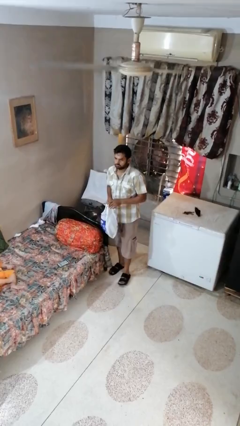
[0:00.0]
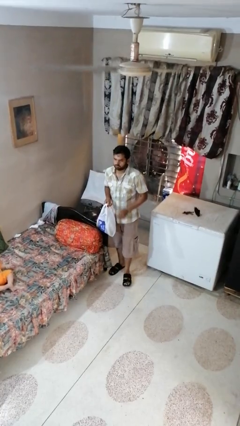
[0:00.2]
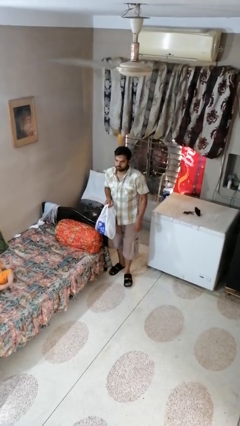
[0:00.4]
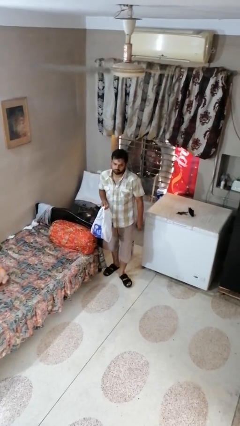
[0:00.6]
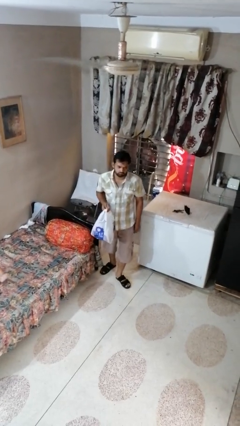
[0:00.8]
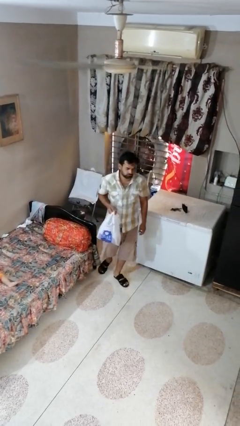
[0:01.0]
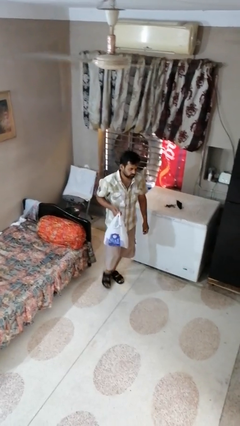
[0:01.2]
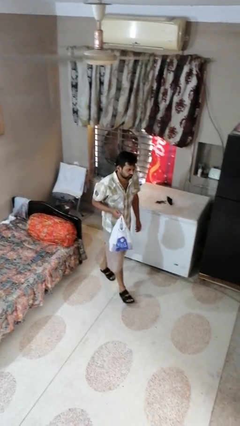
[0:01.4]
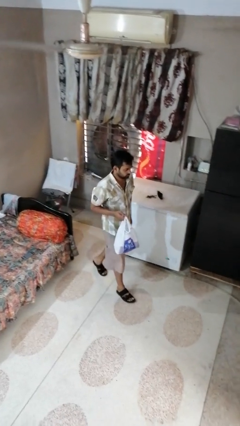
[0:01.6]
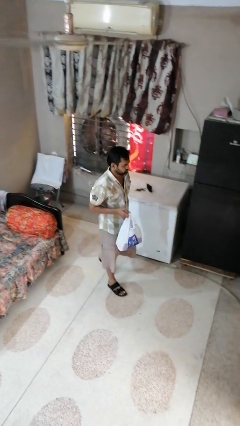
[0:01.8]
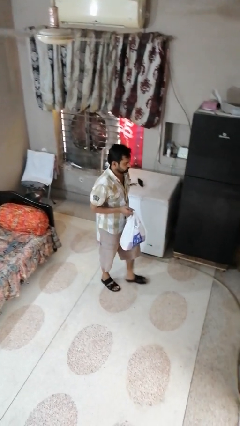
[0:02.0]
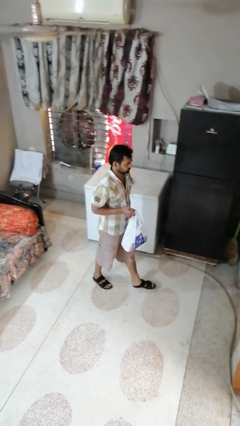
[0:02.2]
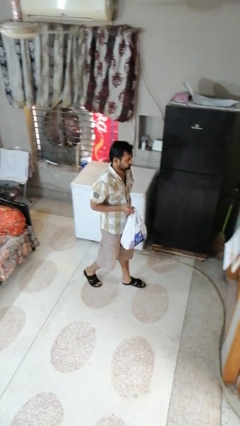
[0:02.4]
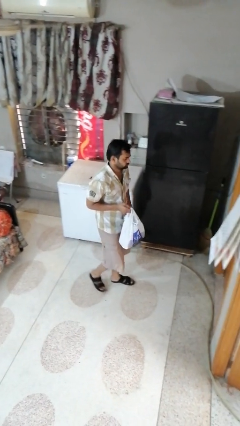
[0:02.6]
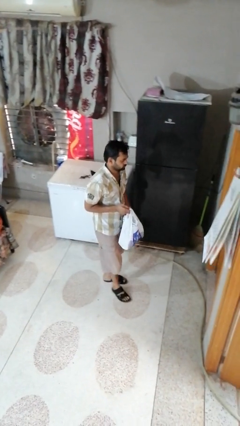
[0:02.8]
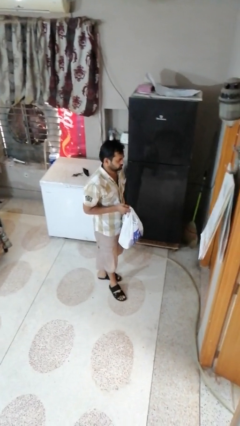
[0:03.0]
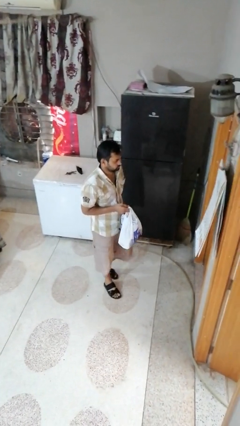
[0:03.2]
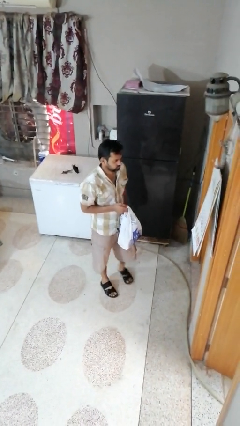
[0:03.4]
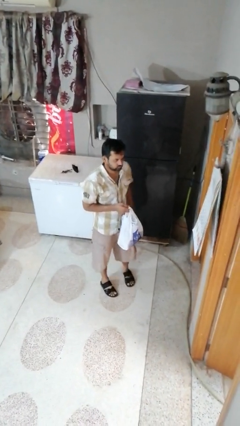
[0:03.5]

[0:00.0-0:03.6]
person carries groceries

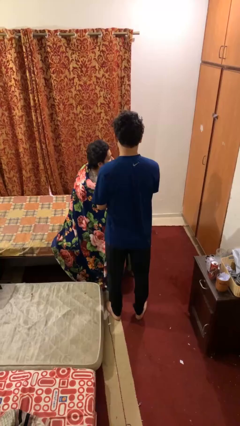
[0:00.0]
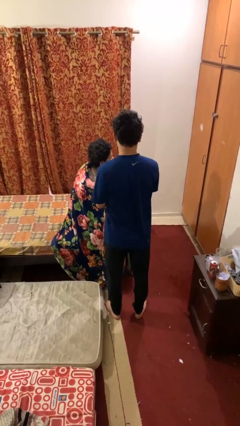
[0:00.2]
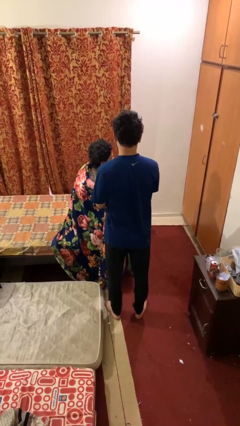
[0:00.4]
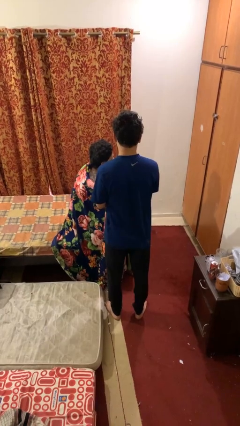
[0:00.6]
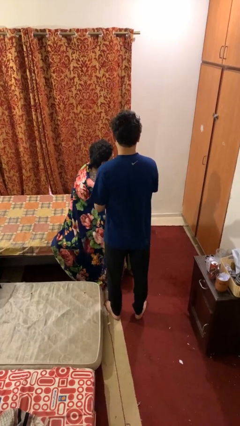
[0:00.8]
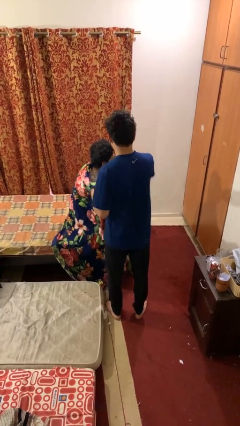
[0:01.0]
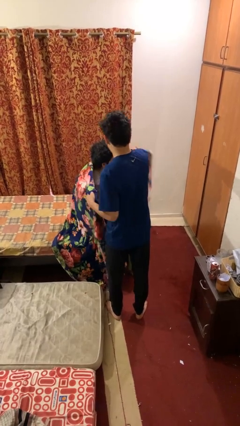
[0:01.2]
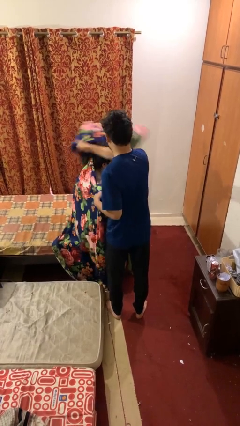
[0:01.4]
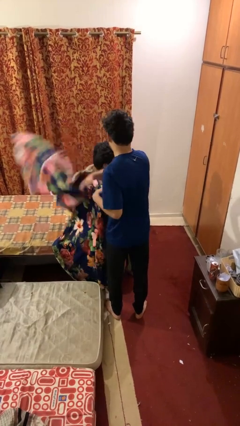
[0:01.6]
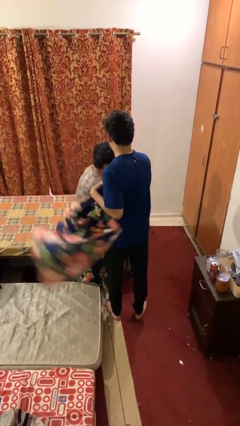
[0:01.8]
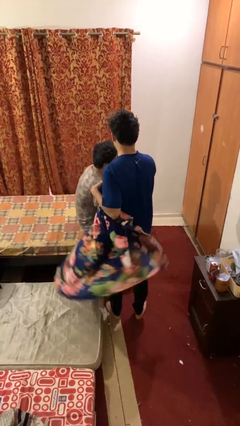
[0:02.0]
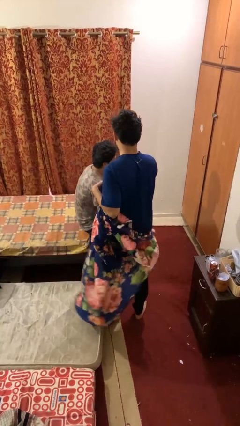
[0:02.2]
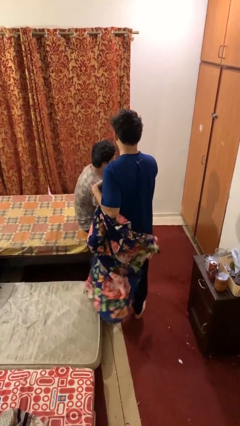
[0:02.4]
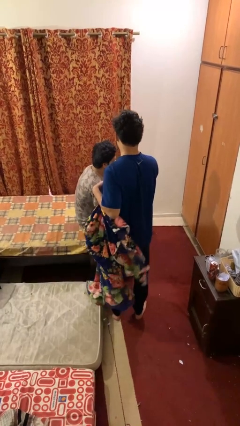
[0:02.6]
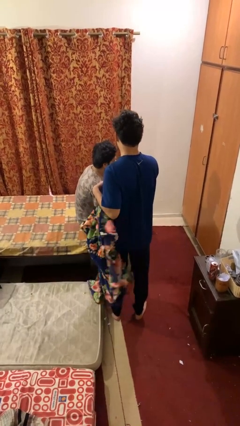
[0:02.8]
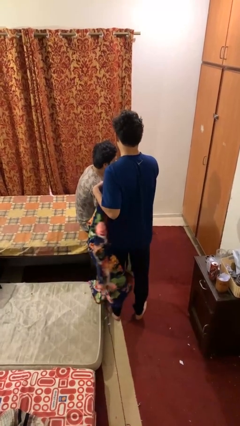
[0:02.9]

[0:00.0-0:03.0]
person uncovers friend with blanket

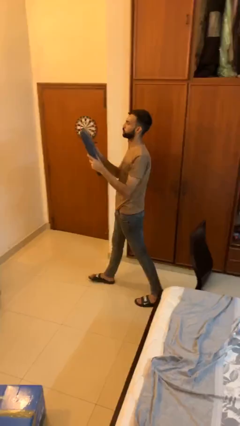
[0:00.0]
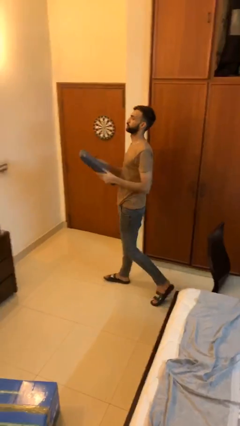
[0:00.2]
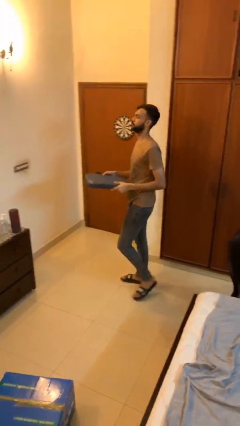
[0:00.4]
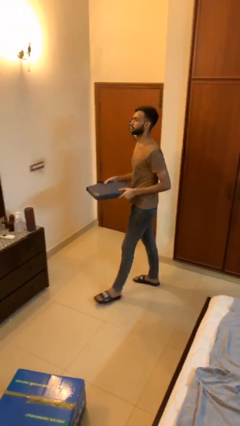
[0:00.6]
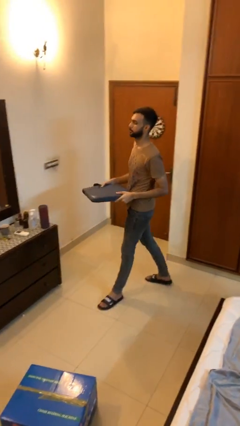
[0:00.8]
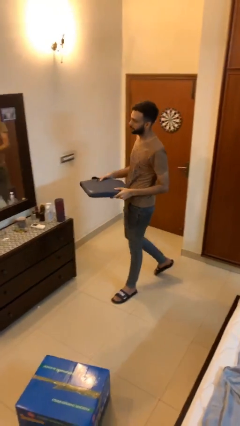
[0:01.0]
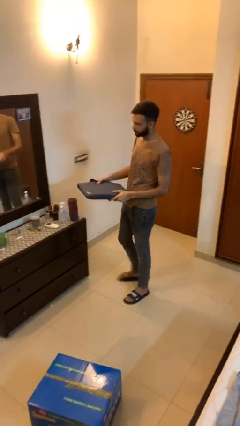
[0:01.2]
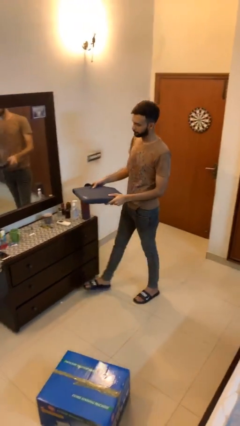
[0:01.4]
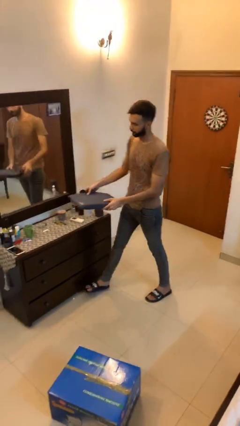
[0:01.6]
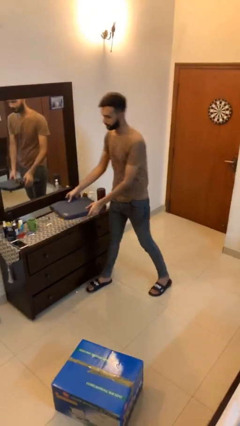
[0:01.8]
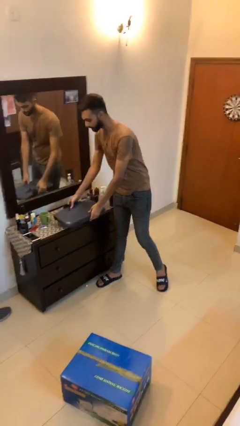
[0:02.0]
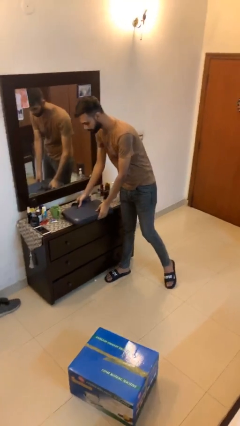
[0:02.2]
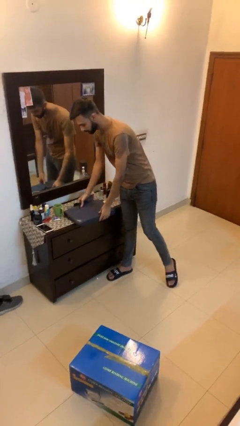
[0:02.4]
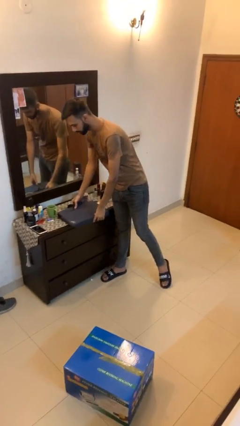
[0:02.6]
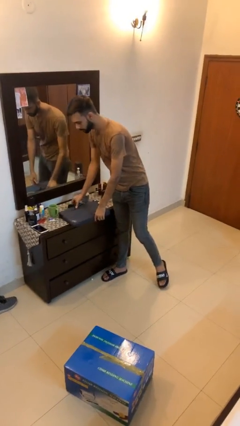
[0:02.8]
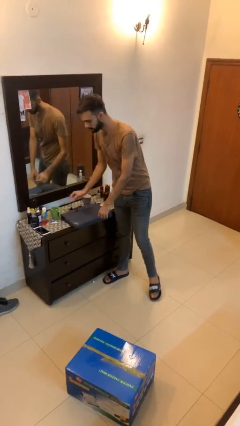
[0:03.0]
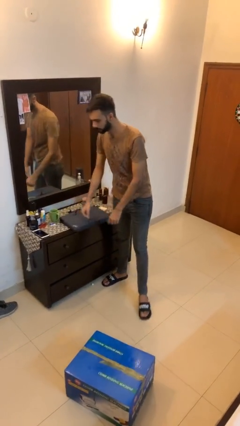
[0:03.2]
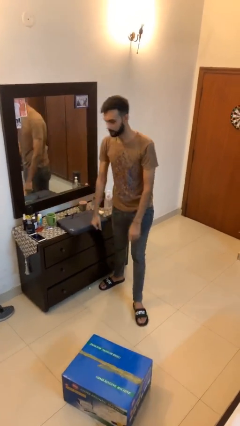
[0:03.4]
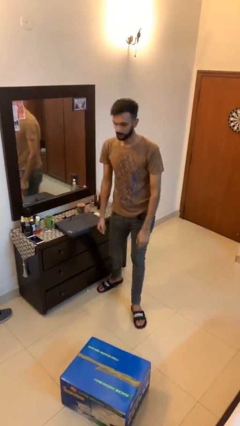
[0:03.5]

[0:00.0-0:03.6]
person puts down object on table

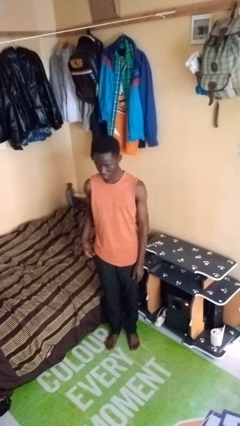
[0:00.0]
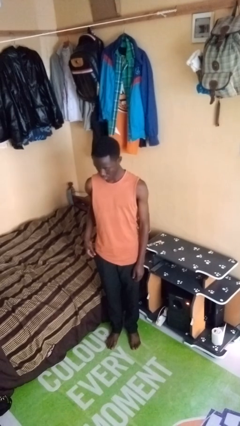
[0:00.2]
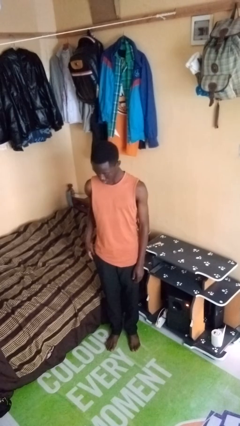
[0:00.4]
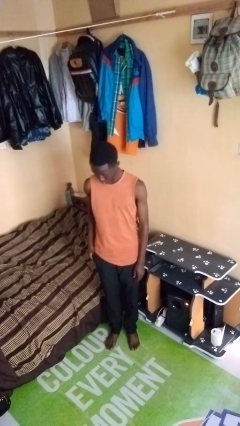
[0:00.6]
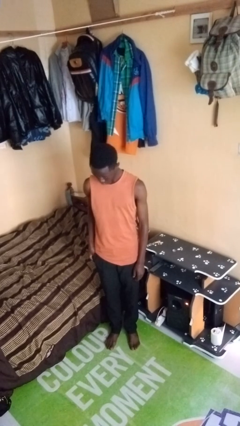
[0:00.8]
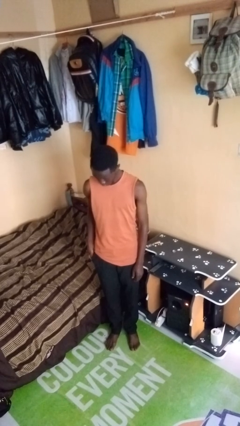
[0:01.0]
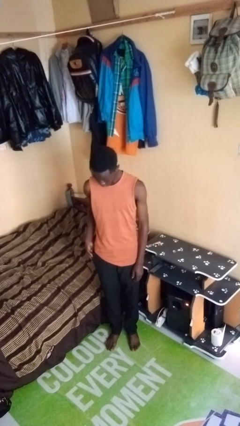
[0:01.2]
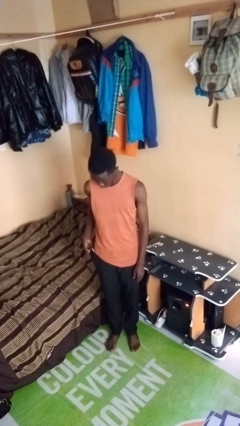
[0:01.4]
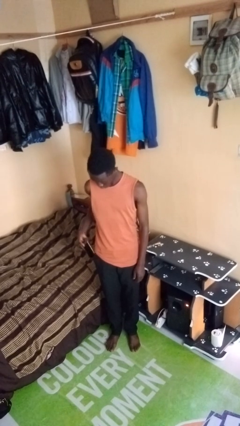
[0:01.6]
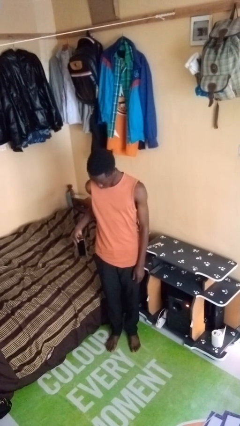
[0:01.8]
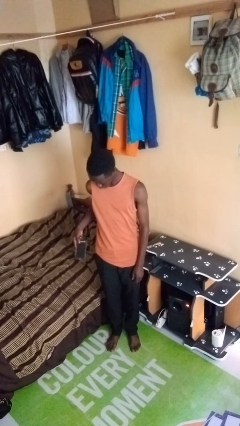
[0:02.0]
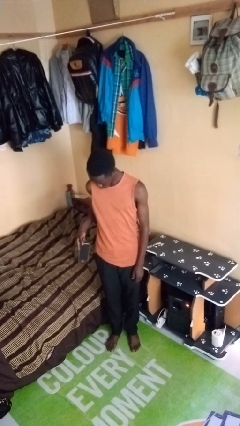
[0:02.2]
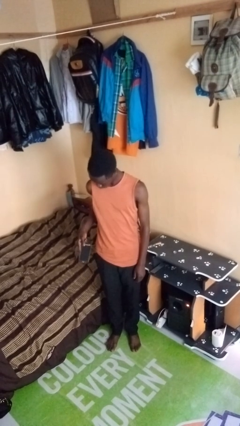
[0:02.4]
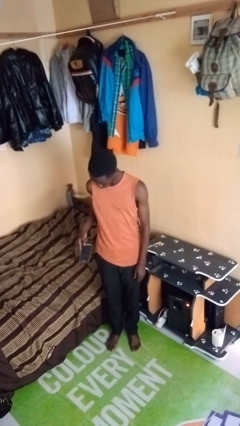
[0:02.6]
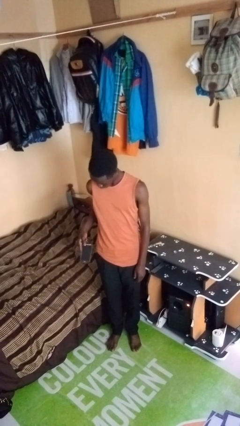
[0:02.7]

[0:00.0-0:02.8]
person takes phone from pocket

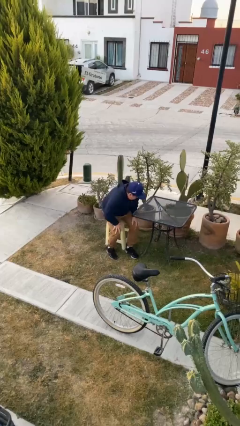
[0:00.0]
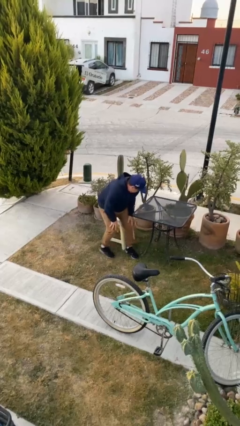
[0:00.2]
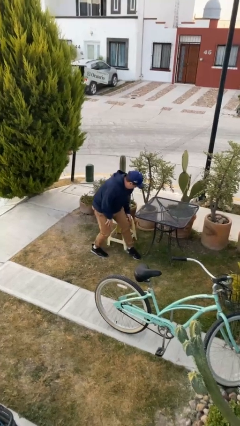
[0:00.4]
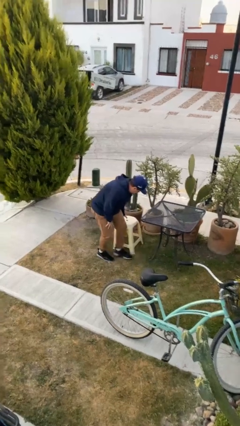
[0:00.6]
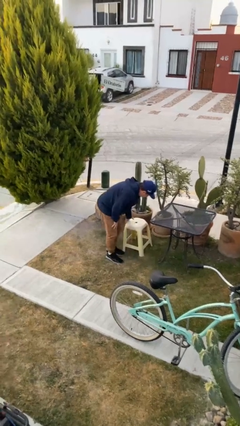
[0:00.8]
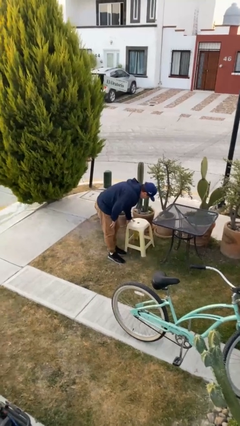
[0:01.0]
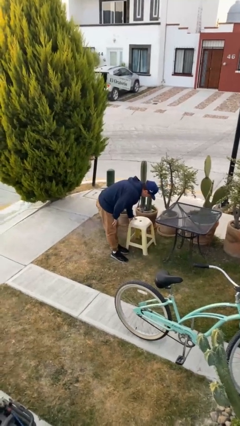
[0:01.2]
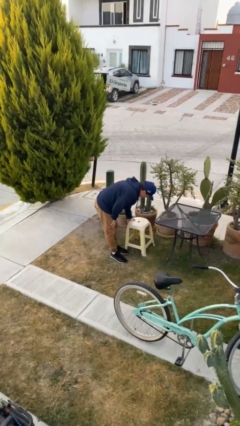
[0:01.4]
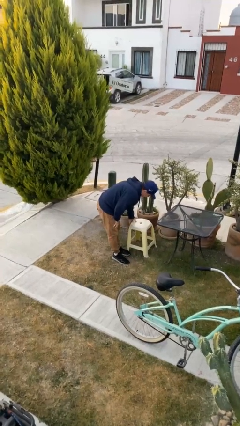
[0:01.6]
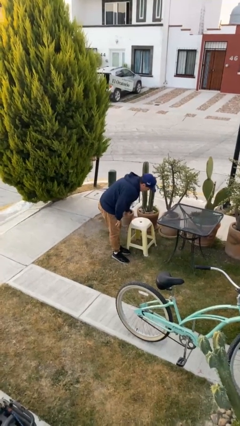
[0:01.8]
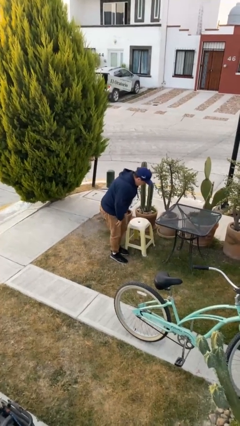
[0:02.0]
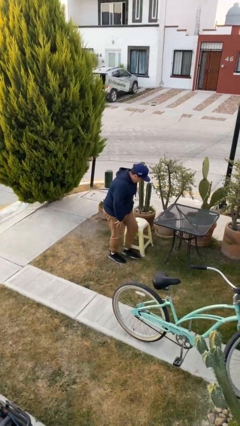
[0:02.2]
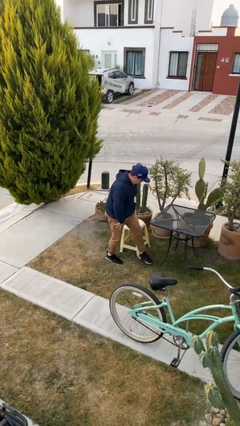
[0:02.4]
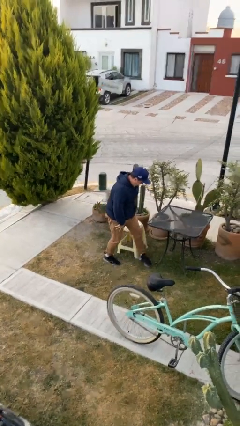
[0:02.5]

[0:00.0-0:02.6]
person stands up

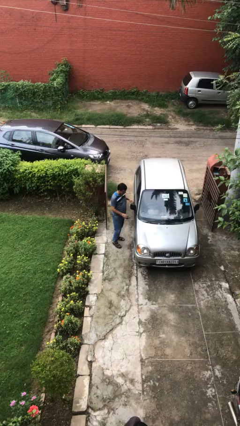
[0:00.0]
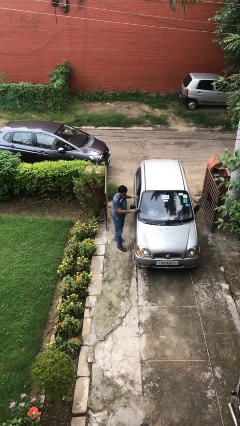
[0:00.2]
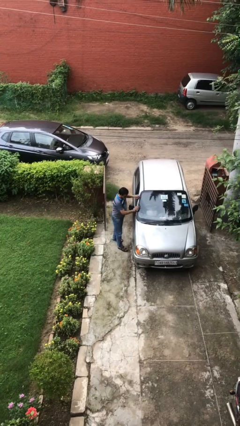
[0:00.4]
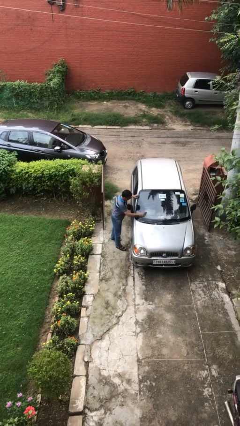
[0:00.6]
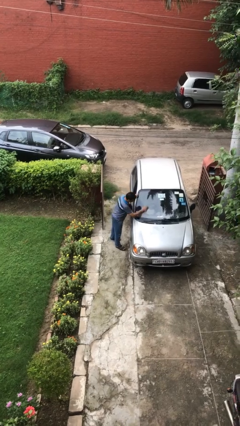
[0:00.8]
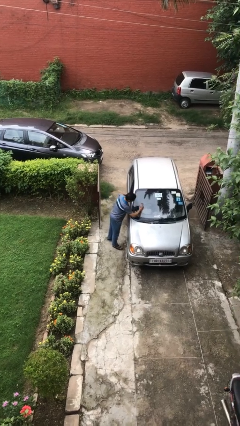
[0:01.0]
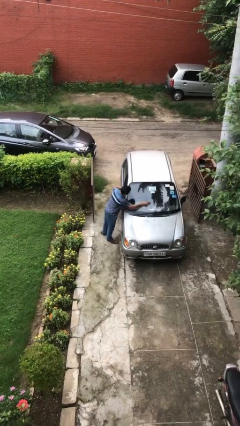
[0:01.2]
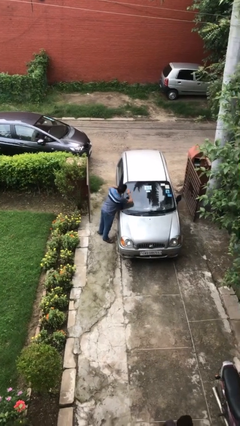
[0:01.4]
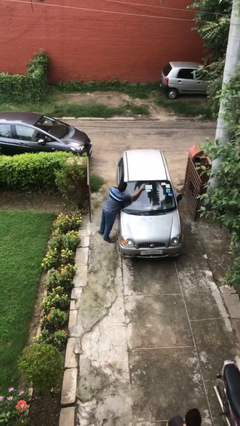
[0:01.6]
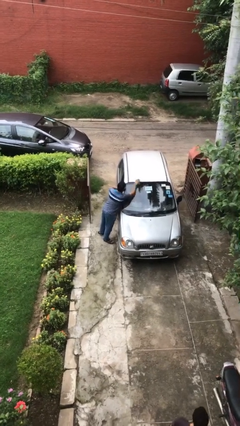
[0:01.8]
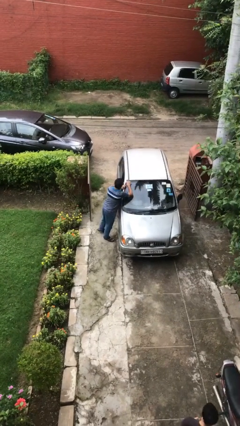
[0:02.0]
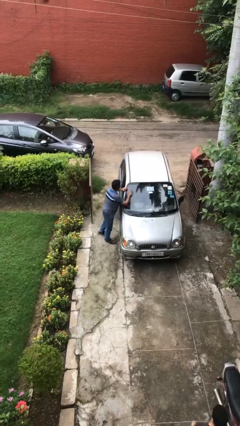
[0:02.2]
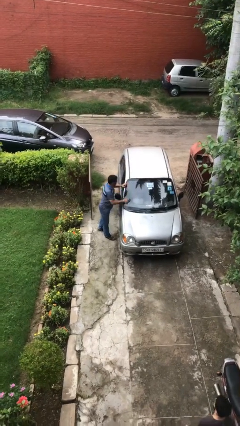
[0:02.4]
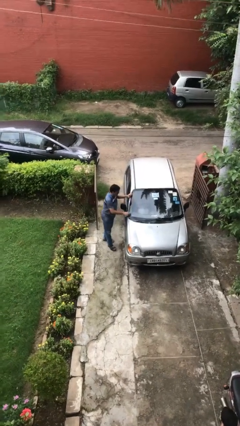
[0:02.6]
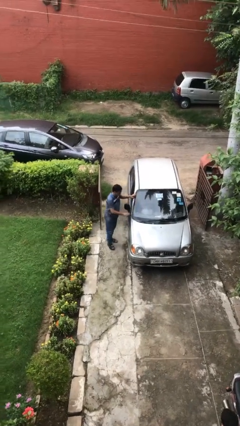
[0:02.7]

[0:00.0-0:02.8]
person polishes car with rag
